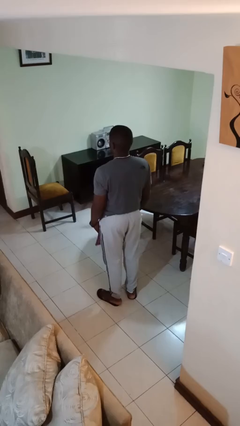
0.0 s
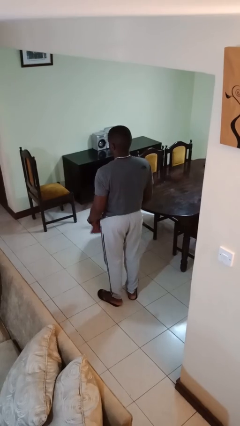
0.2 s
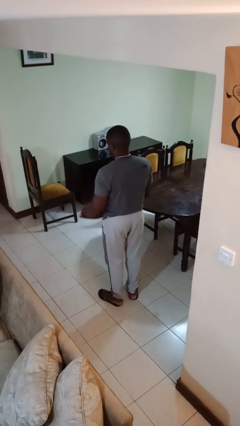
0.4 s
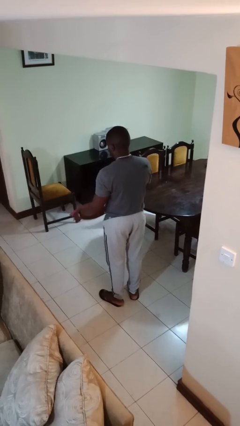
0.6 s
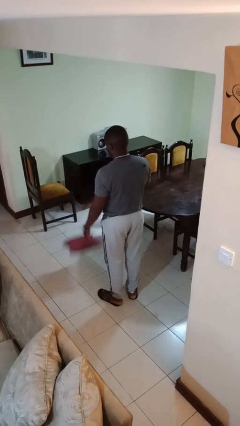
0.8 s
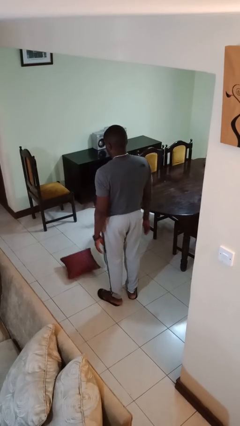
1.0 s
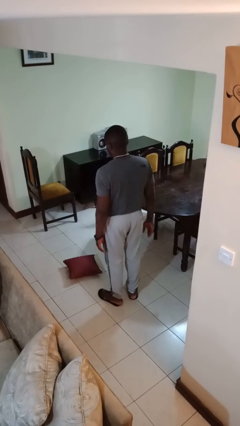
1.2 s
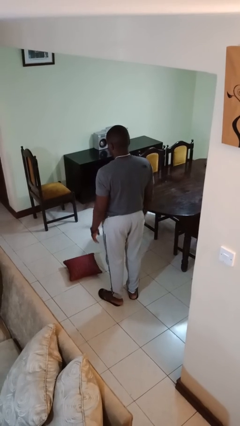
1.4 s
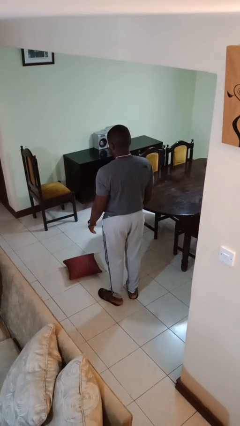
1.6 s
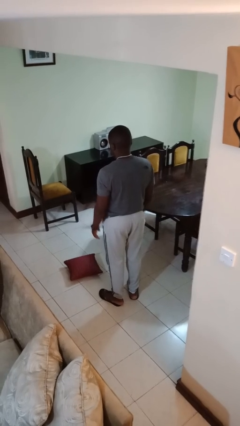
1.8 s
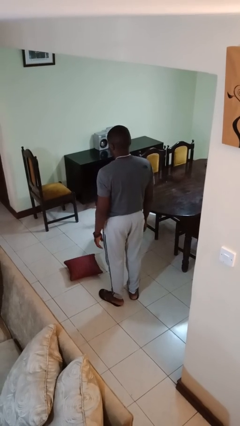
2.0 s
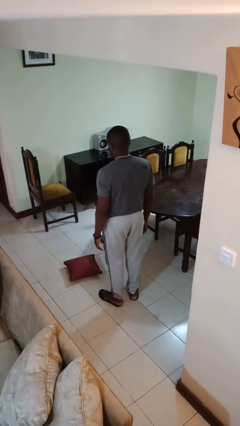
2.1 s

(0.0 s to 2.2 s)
person throws object to ground

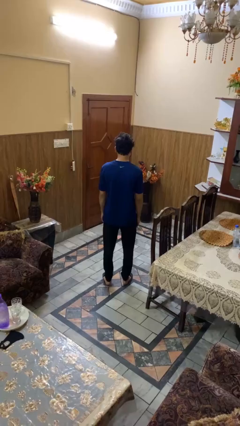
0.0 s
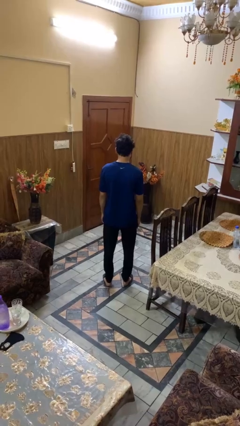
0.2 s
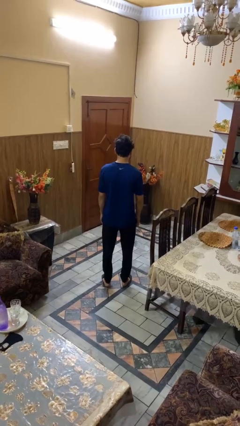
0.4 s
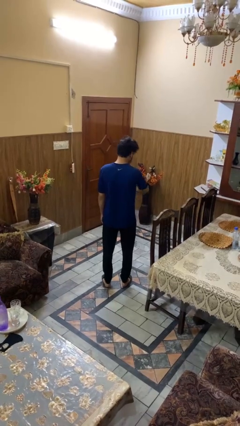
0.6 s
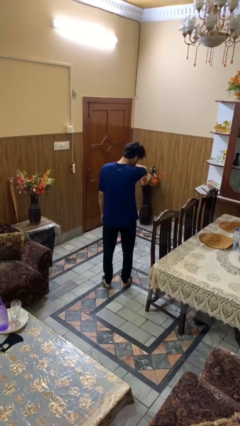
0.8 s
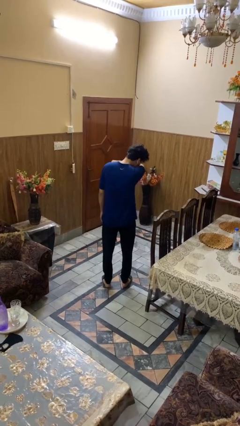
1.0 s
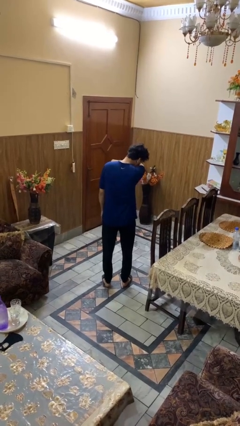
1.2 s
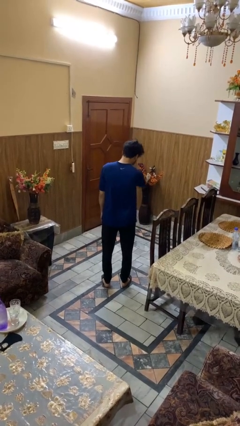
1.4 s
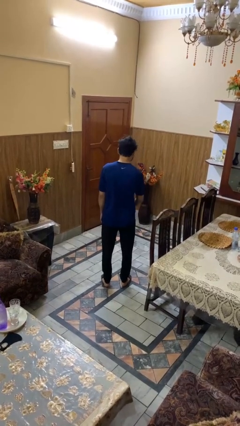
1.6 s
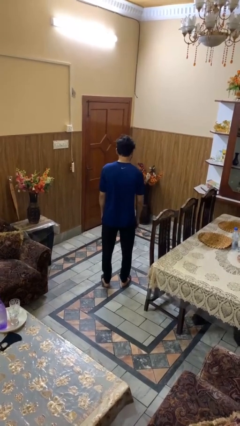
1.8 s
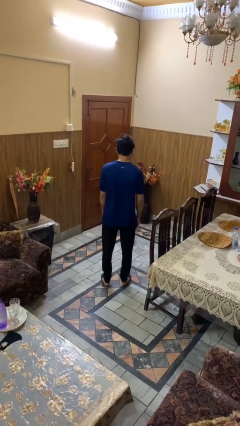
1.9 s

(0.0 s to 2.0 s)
person sneezes into arm

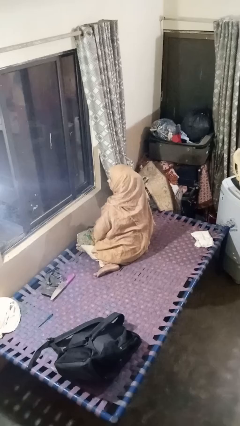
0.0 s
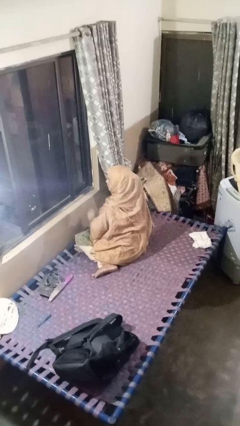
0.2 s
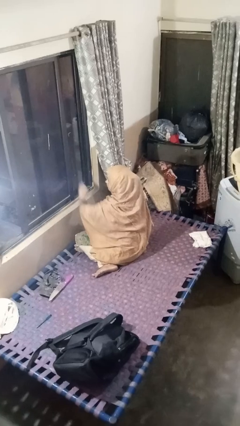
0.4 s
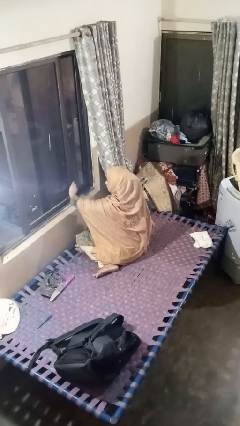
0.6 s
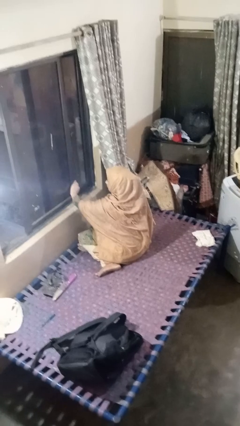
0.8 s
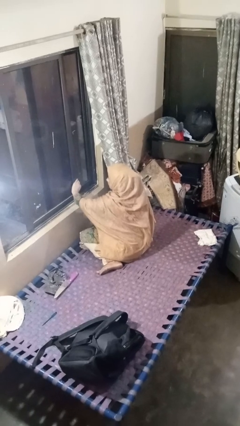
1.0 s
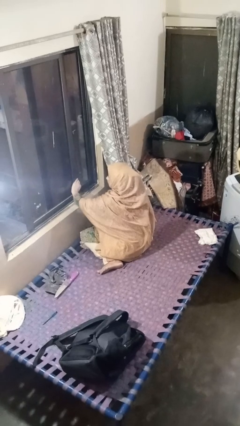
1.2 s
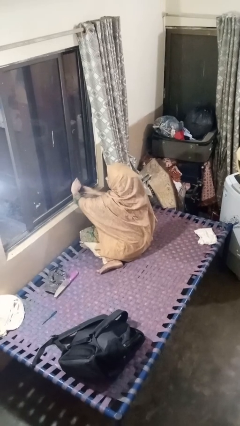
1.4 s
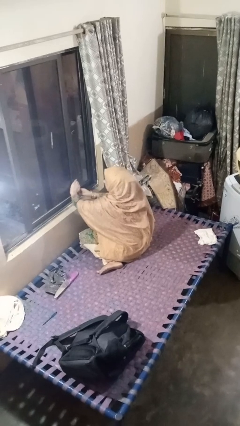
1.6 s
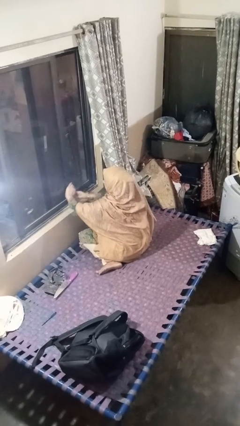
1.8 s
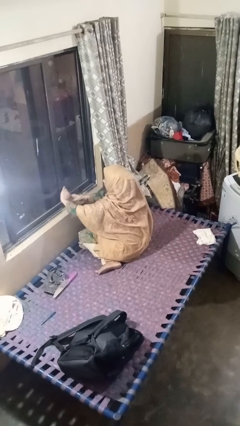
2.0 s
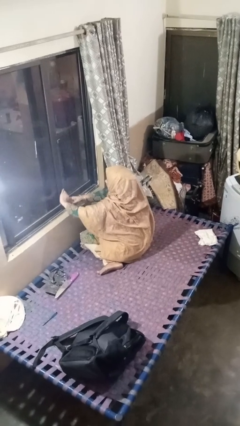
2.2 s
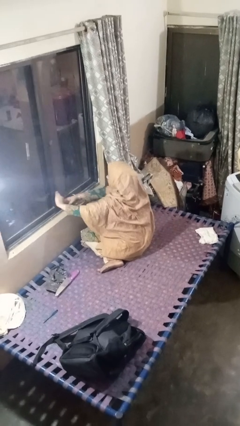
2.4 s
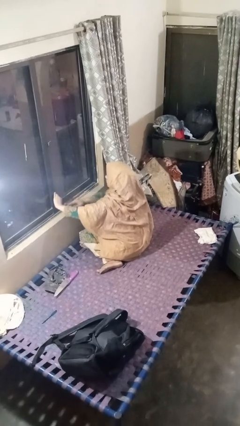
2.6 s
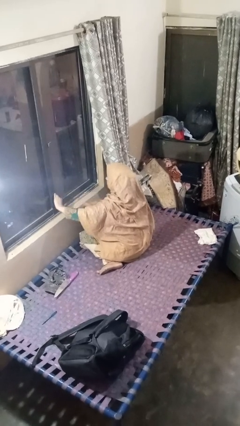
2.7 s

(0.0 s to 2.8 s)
person closes home window

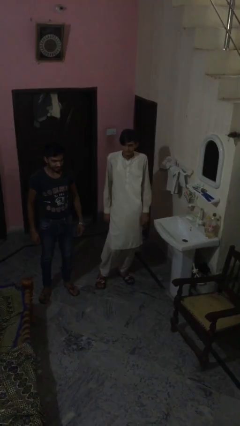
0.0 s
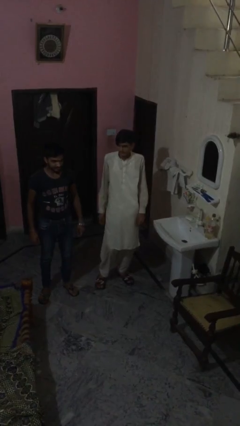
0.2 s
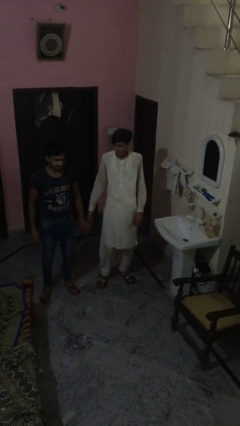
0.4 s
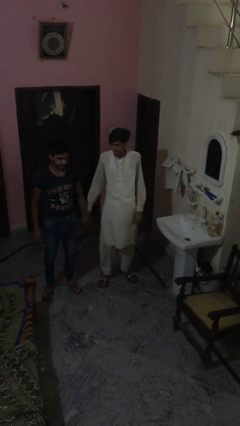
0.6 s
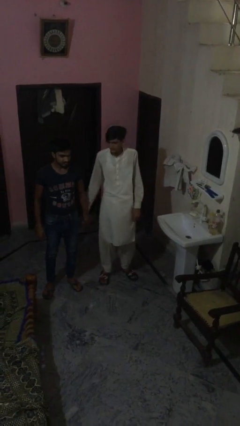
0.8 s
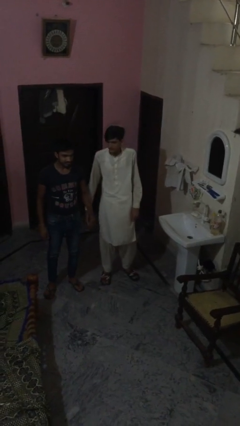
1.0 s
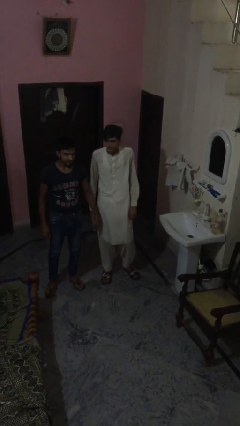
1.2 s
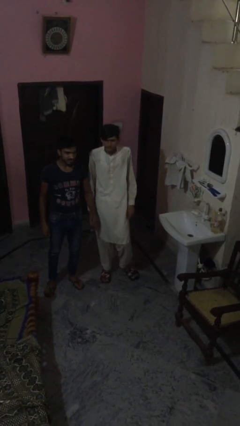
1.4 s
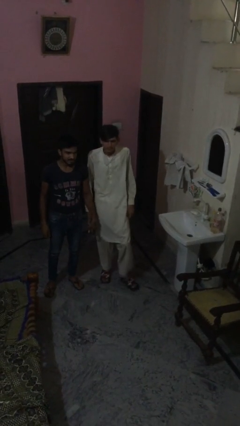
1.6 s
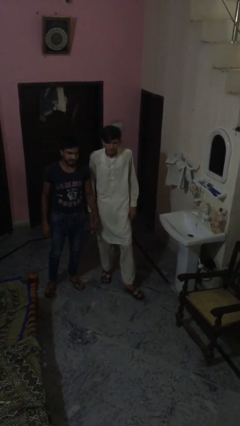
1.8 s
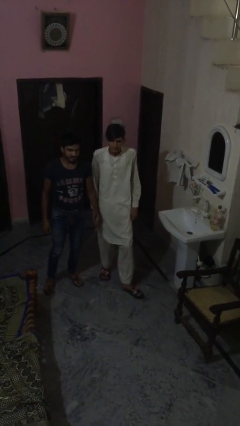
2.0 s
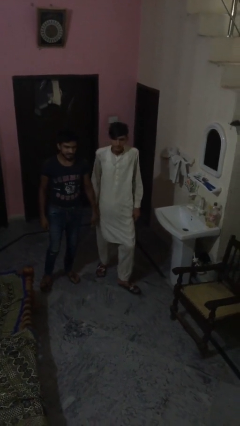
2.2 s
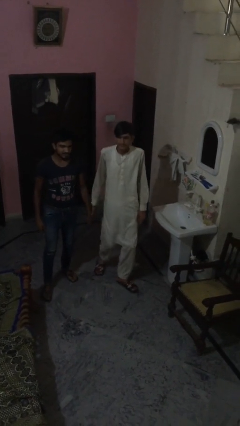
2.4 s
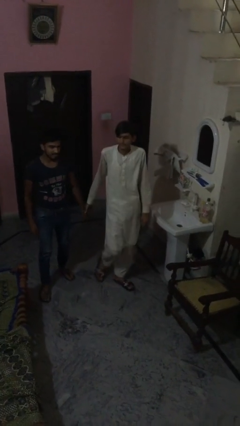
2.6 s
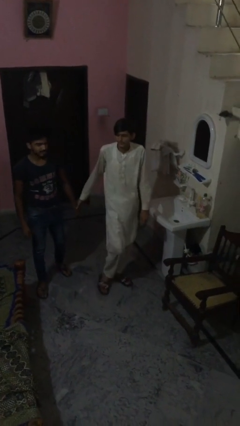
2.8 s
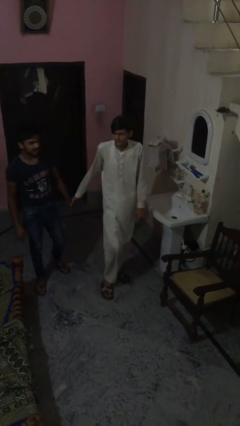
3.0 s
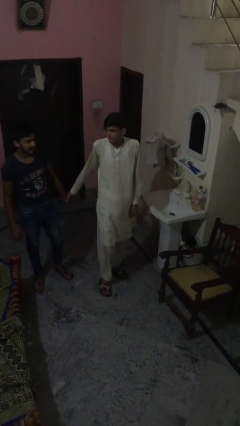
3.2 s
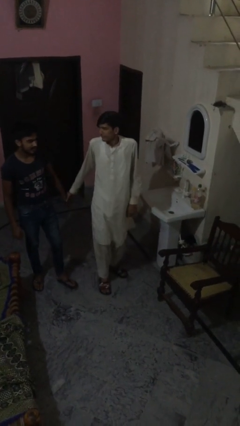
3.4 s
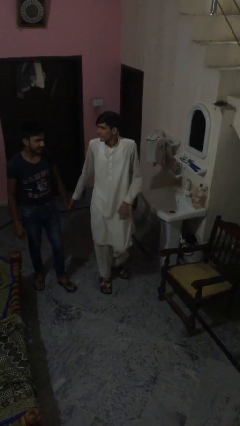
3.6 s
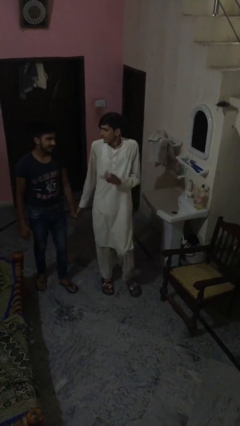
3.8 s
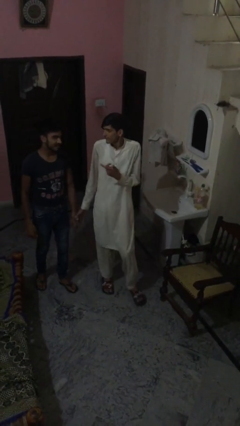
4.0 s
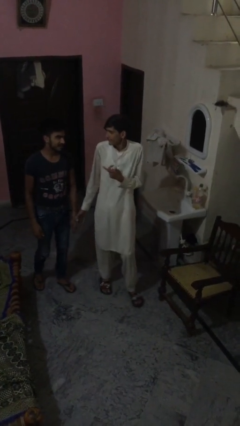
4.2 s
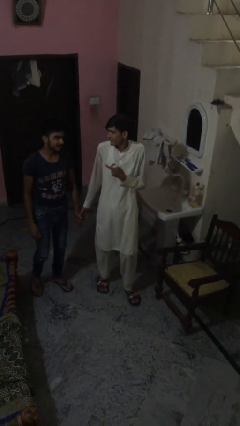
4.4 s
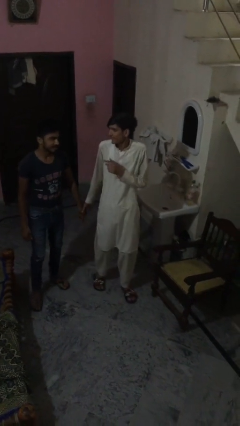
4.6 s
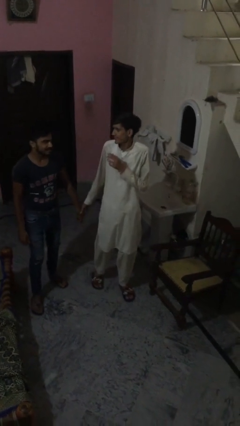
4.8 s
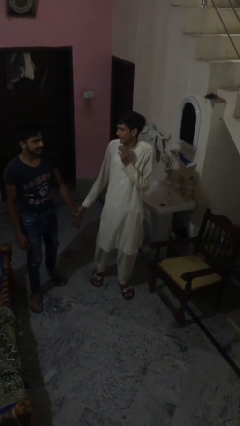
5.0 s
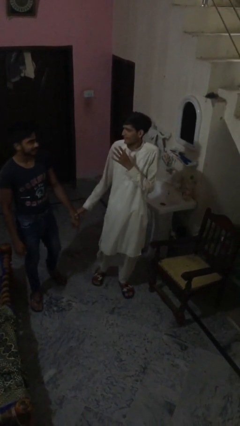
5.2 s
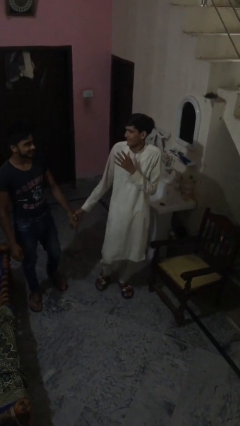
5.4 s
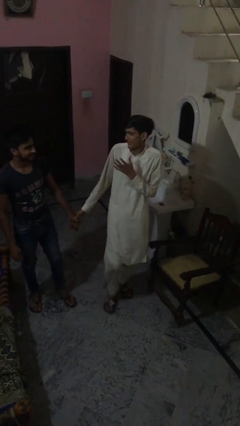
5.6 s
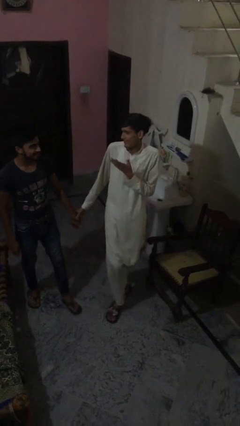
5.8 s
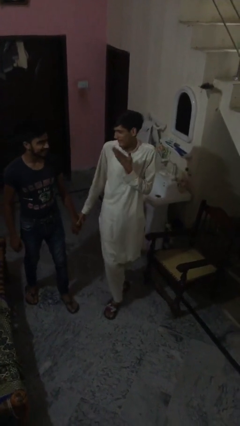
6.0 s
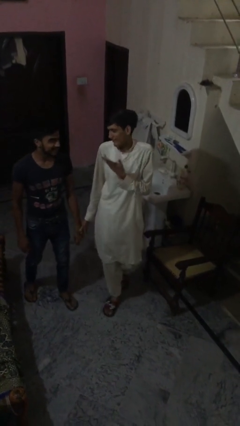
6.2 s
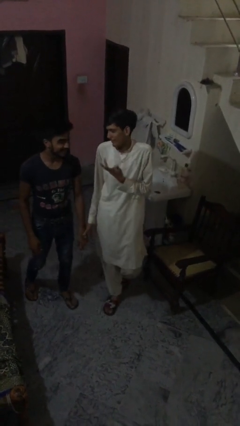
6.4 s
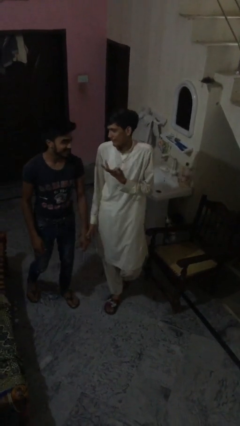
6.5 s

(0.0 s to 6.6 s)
person holds hand

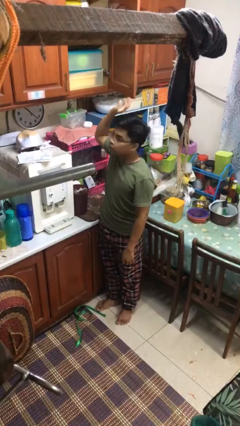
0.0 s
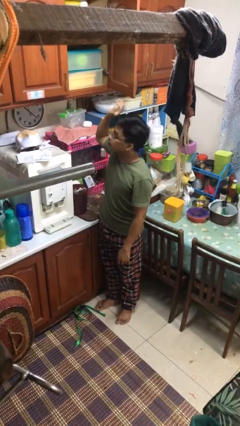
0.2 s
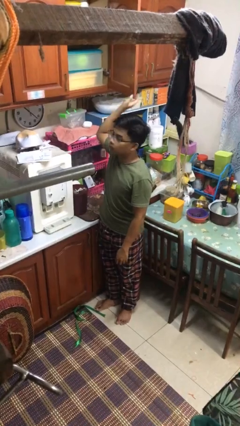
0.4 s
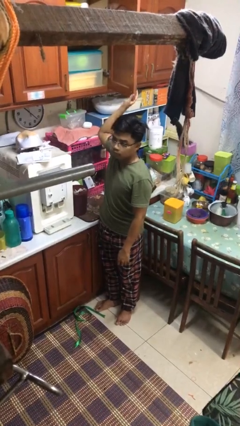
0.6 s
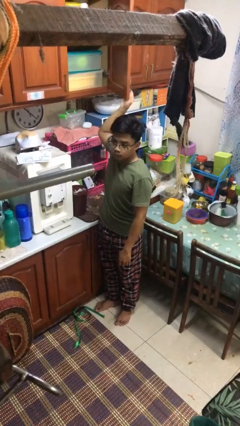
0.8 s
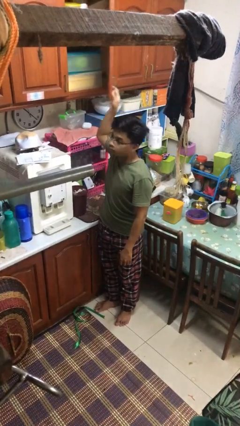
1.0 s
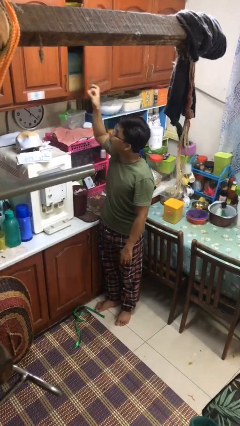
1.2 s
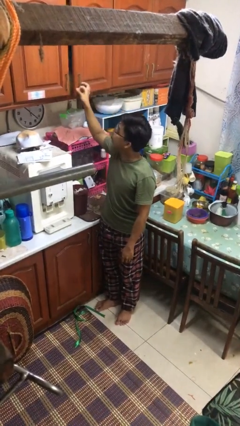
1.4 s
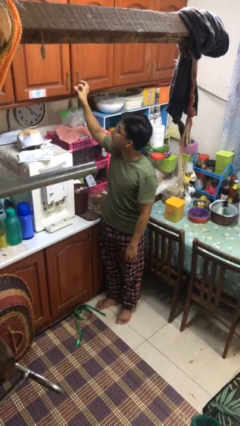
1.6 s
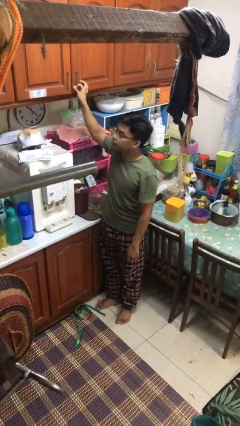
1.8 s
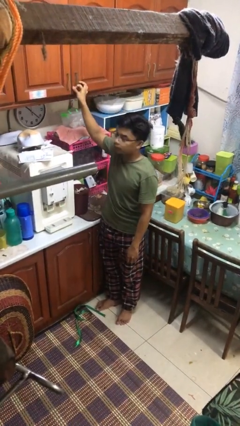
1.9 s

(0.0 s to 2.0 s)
person closes kitchen drawer

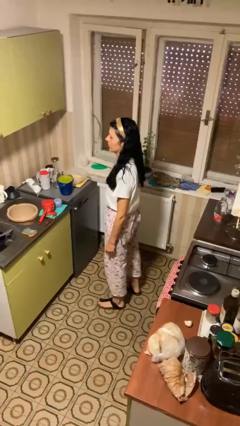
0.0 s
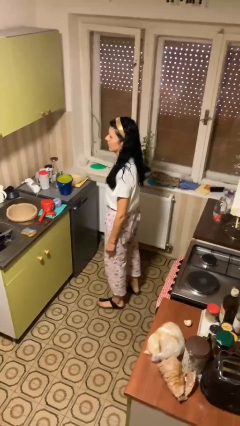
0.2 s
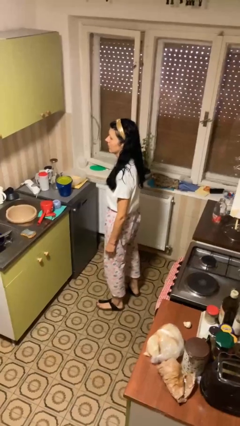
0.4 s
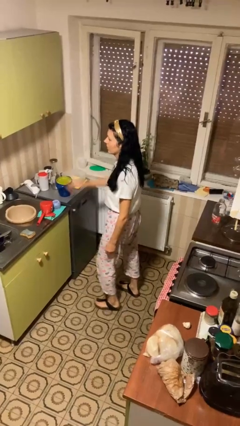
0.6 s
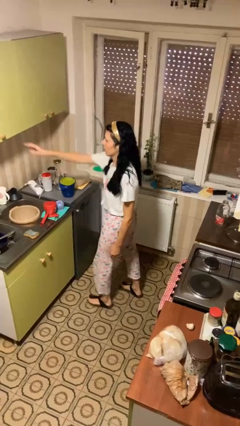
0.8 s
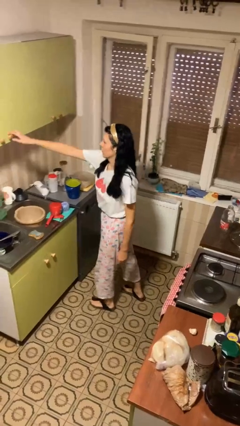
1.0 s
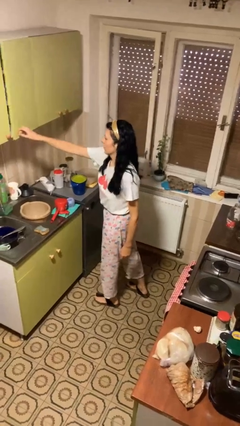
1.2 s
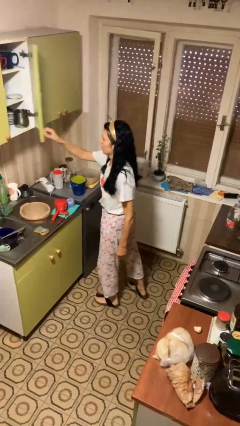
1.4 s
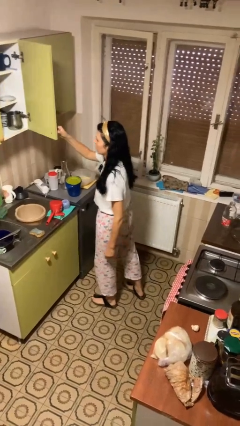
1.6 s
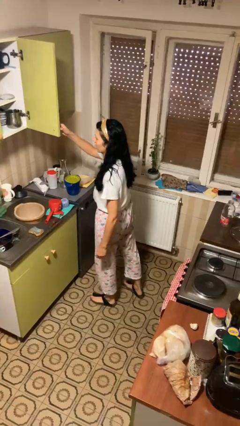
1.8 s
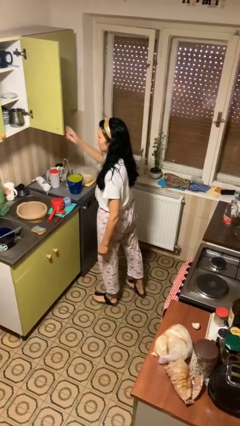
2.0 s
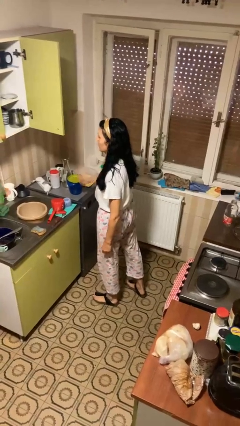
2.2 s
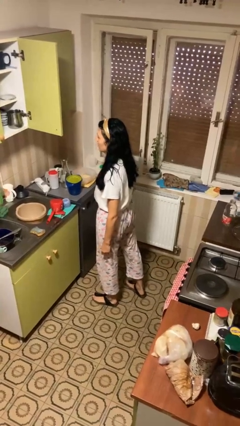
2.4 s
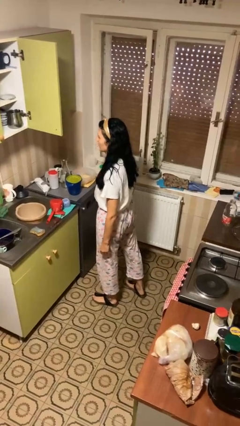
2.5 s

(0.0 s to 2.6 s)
person opens cabinet
